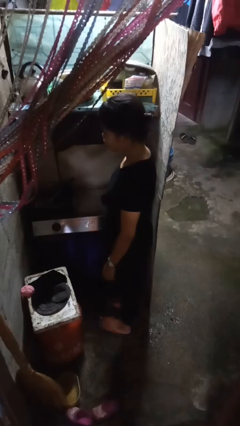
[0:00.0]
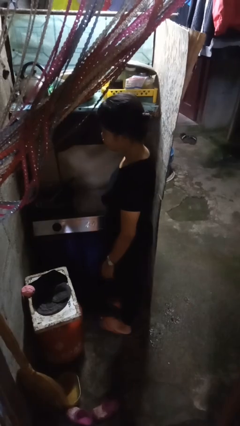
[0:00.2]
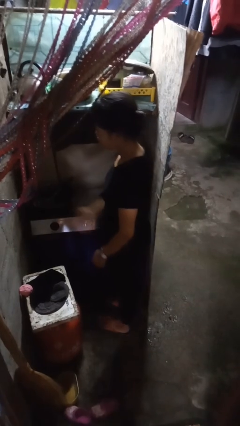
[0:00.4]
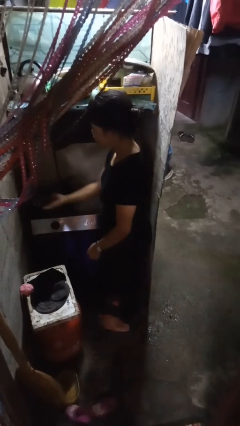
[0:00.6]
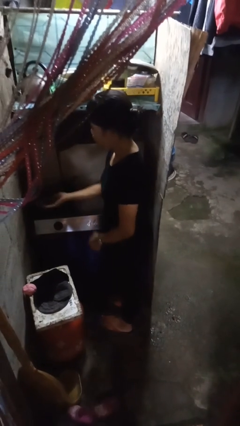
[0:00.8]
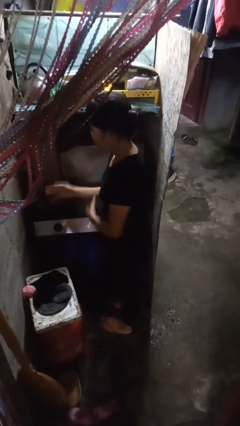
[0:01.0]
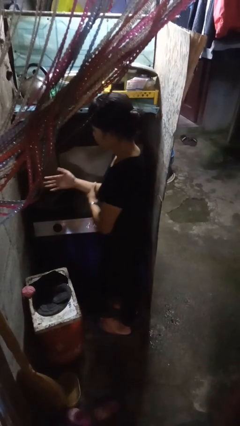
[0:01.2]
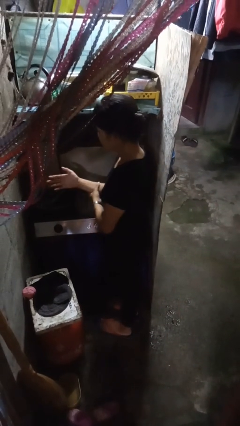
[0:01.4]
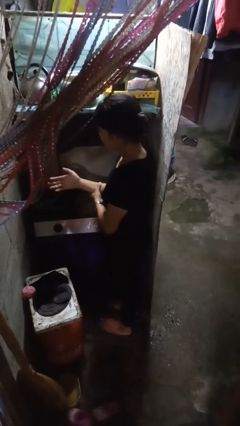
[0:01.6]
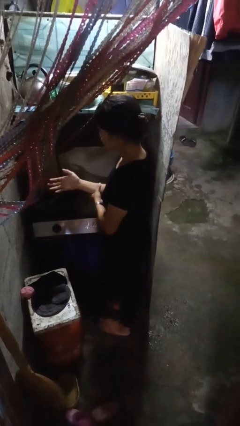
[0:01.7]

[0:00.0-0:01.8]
person burns hand

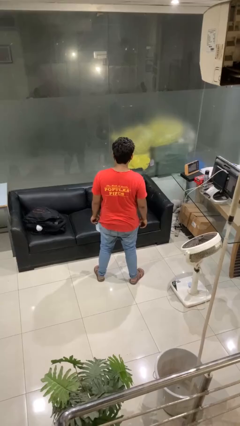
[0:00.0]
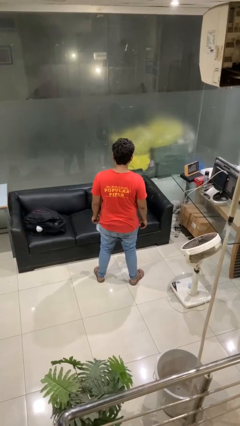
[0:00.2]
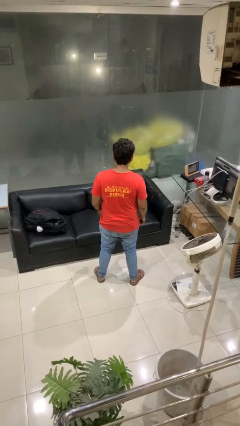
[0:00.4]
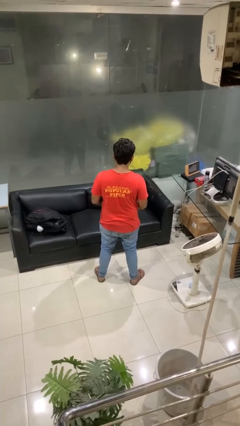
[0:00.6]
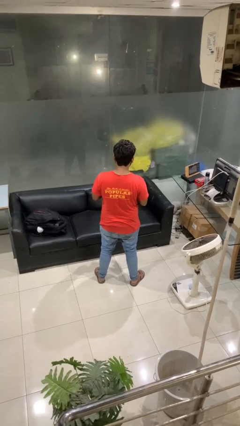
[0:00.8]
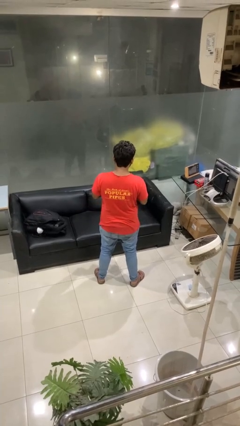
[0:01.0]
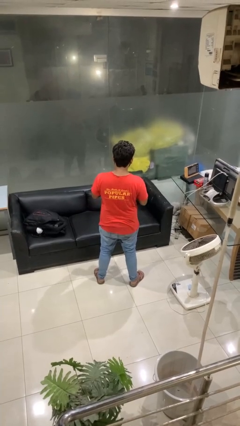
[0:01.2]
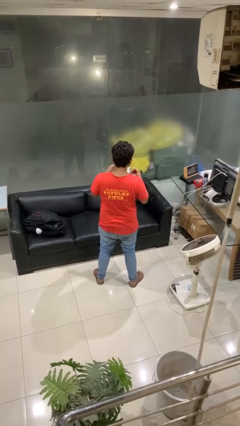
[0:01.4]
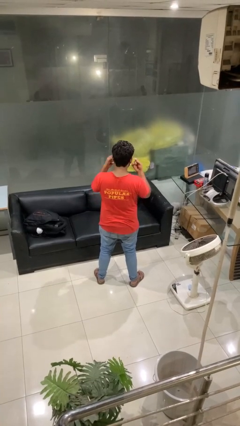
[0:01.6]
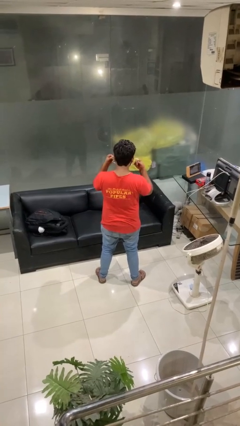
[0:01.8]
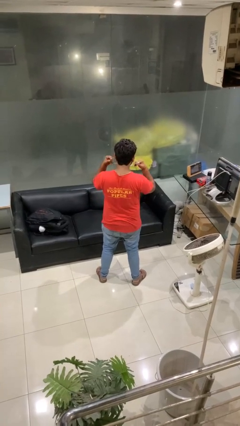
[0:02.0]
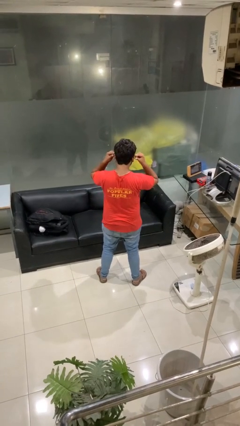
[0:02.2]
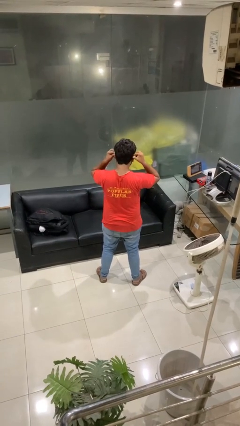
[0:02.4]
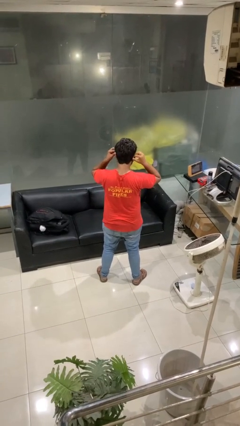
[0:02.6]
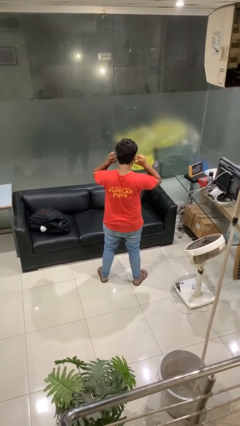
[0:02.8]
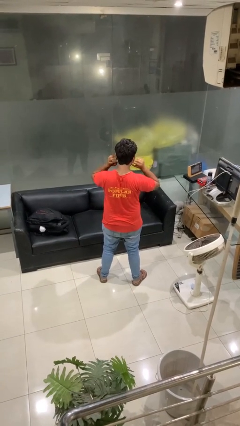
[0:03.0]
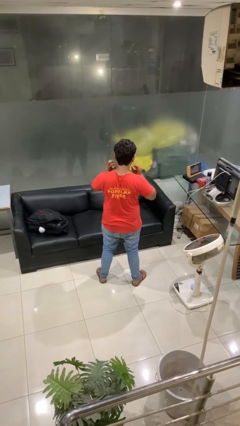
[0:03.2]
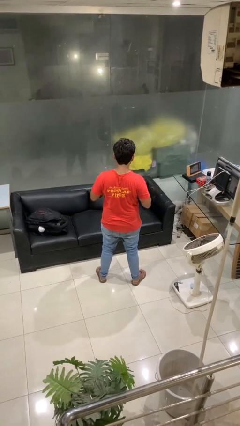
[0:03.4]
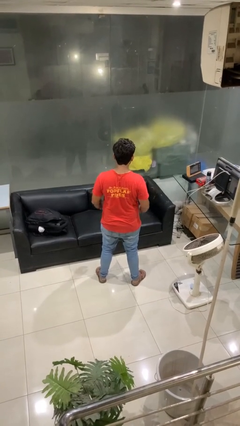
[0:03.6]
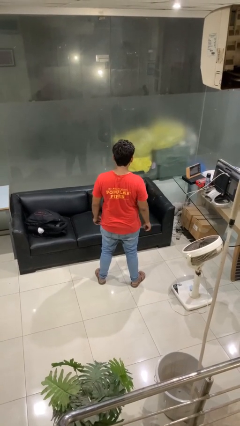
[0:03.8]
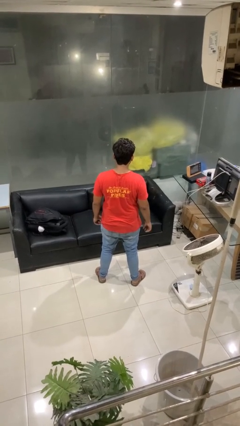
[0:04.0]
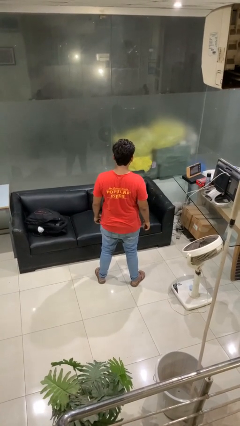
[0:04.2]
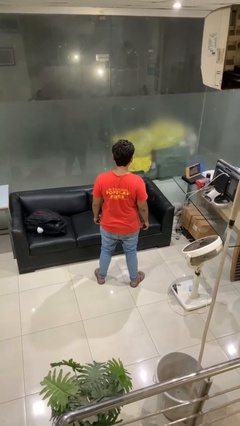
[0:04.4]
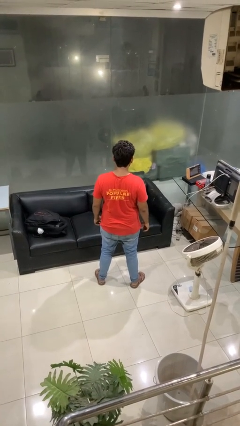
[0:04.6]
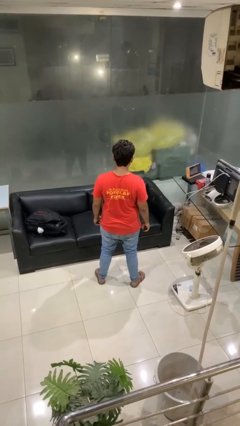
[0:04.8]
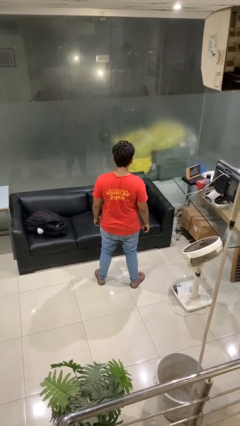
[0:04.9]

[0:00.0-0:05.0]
person puts on facemask

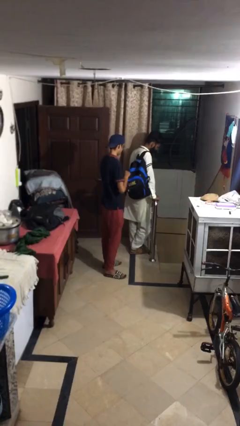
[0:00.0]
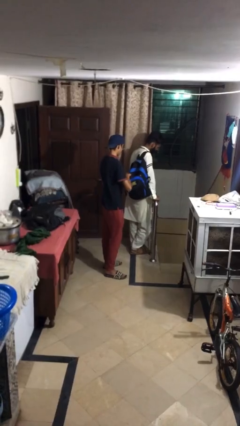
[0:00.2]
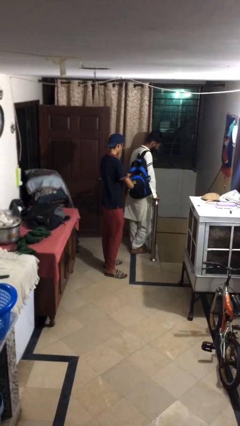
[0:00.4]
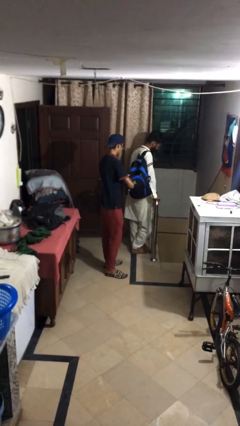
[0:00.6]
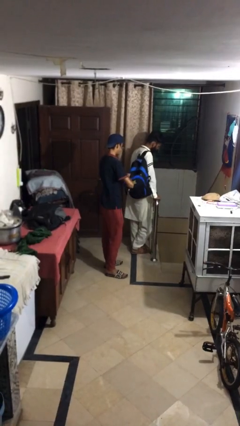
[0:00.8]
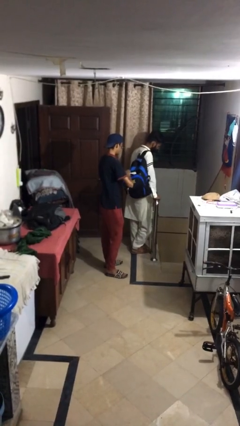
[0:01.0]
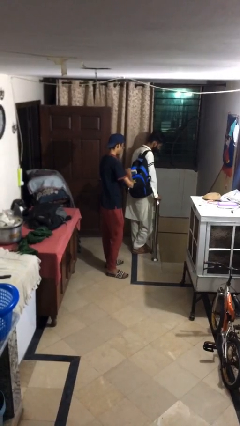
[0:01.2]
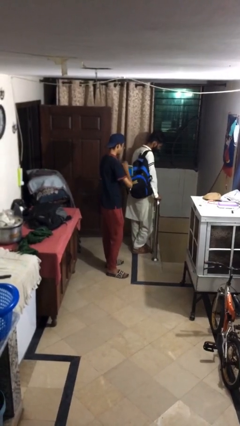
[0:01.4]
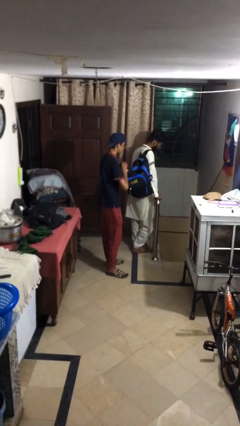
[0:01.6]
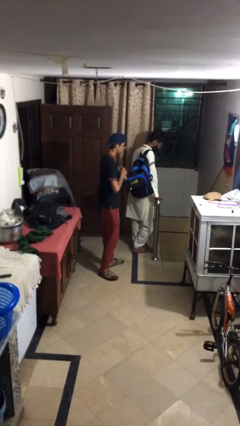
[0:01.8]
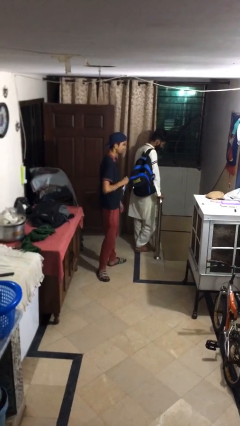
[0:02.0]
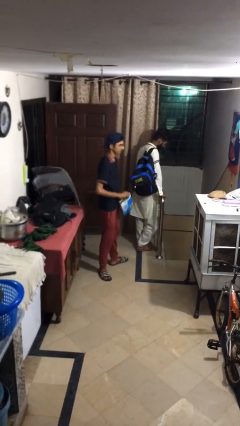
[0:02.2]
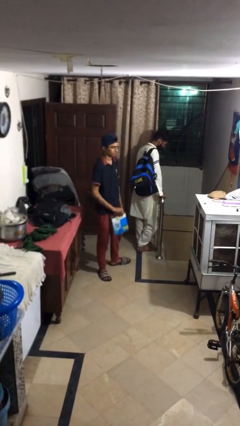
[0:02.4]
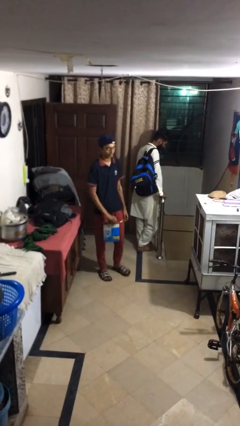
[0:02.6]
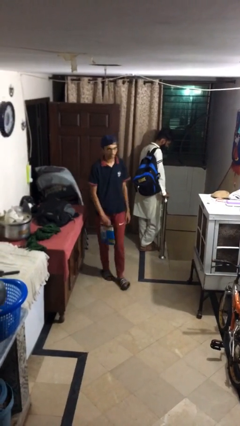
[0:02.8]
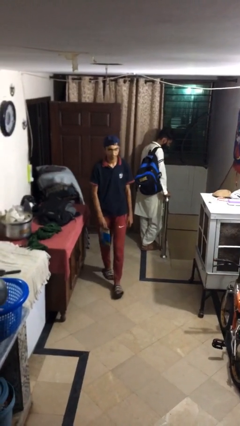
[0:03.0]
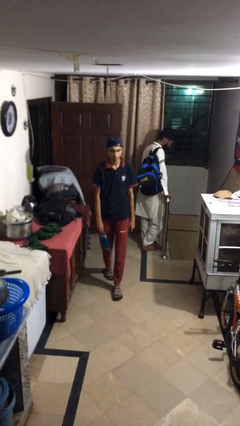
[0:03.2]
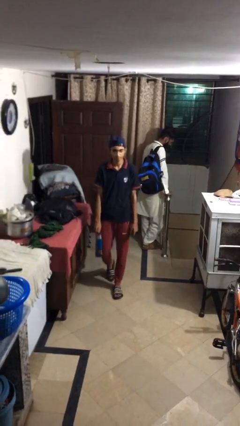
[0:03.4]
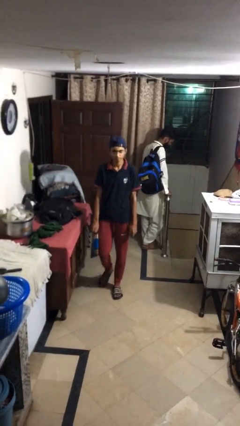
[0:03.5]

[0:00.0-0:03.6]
person steals object from person

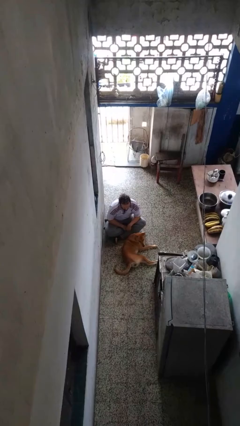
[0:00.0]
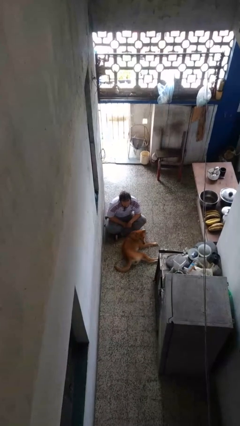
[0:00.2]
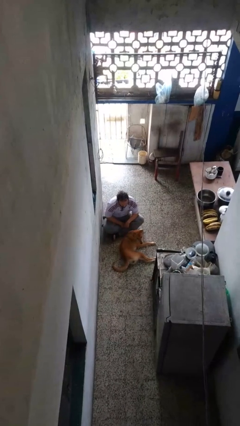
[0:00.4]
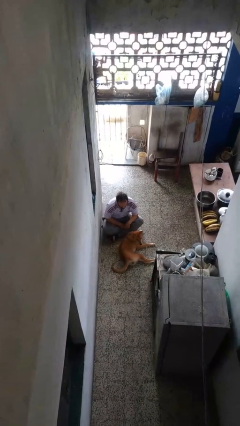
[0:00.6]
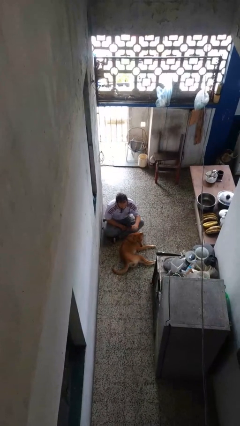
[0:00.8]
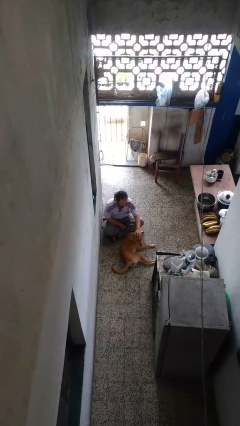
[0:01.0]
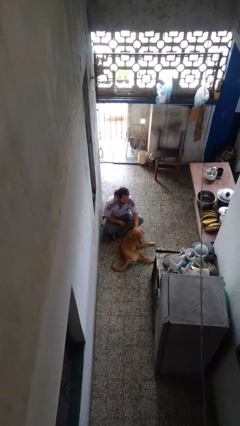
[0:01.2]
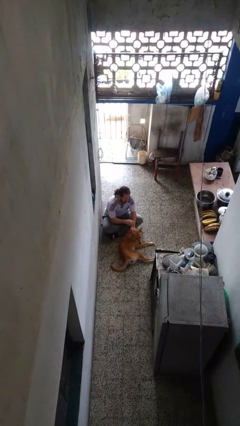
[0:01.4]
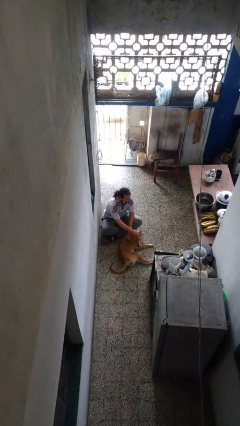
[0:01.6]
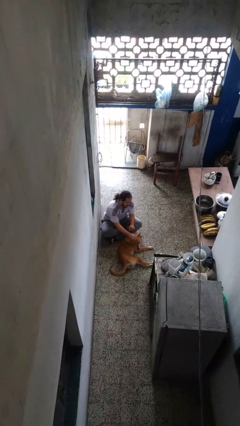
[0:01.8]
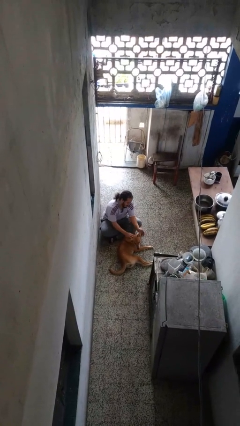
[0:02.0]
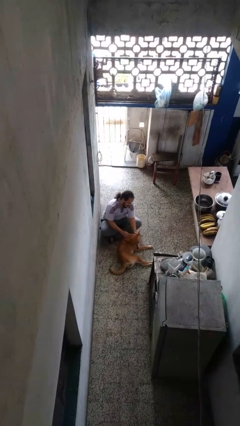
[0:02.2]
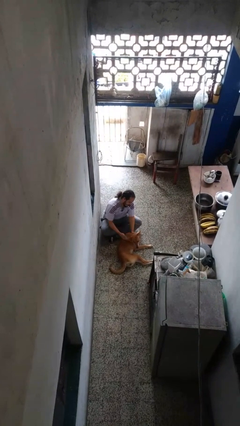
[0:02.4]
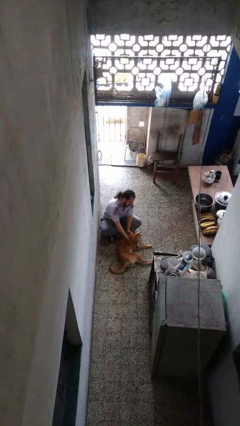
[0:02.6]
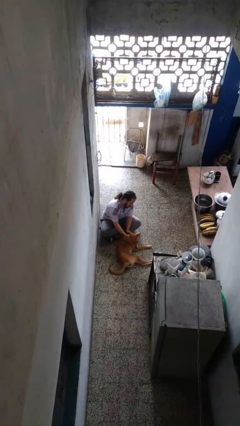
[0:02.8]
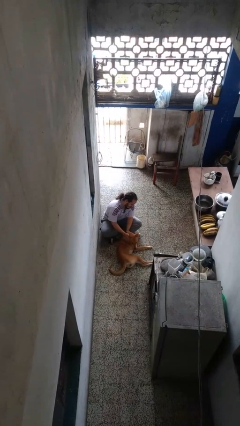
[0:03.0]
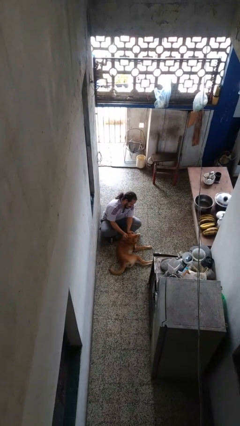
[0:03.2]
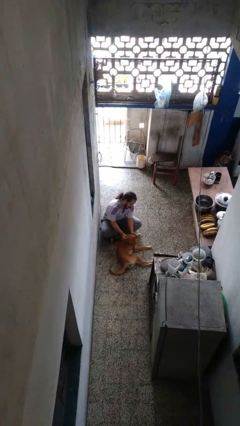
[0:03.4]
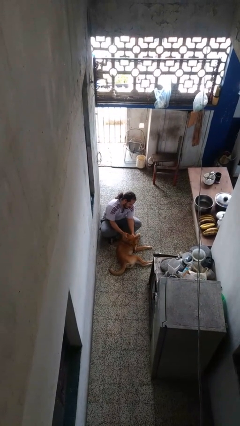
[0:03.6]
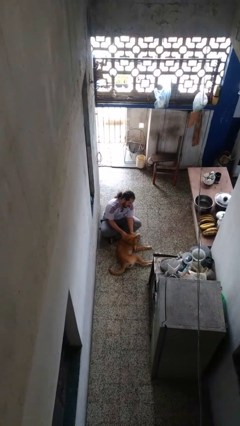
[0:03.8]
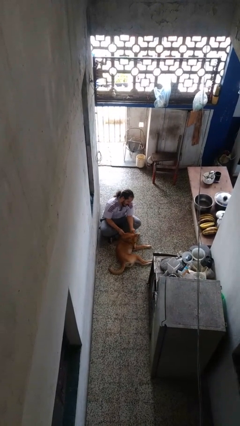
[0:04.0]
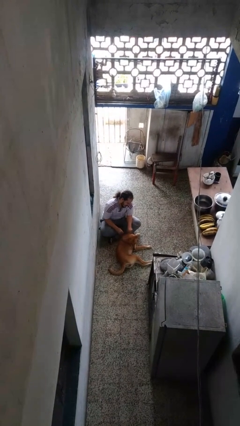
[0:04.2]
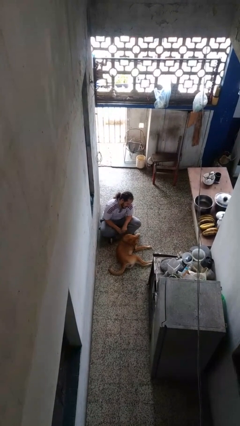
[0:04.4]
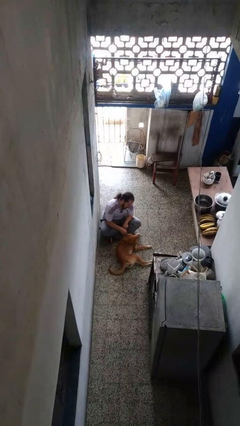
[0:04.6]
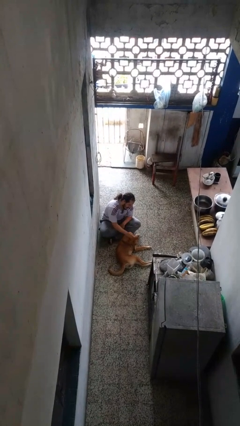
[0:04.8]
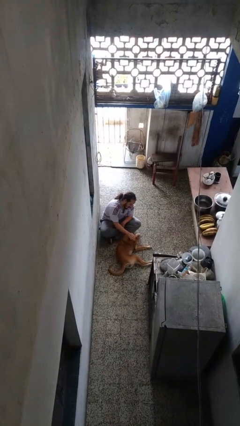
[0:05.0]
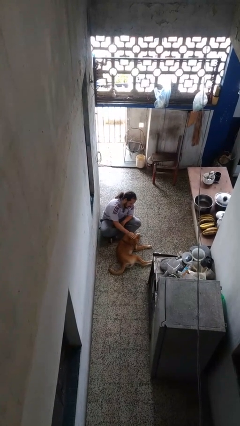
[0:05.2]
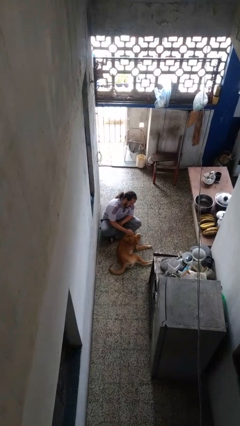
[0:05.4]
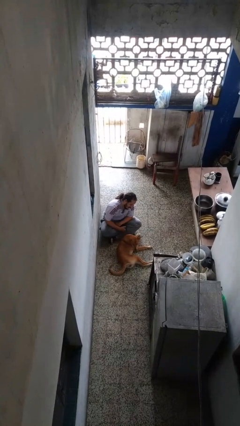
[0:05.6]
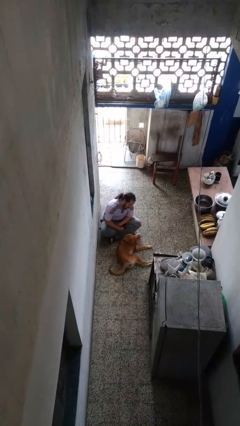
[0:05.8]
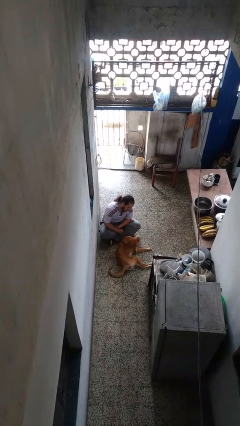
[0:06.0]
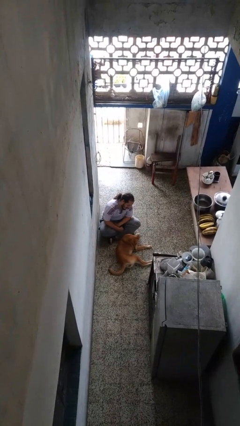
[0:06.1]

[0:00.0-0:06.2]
person pets dog

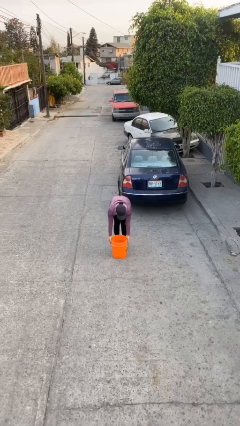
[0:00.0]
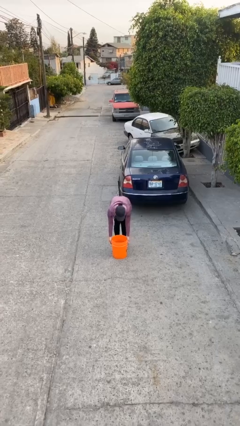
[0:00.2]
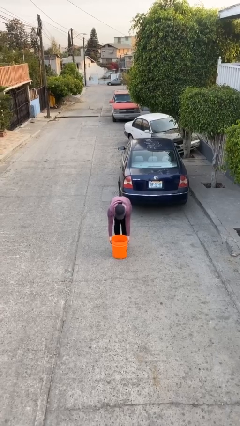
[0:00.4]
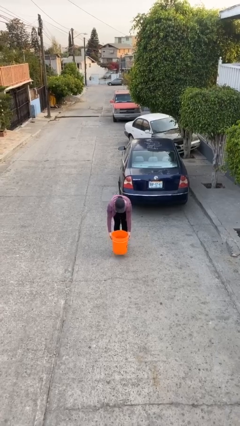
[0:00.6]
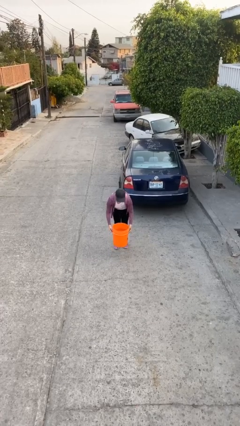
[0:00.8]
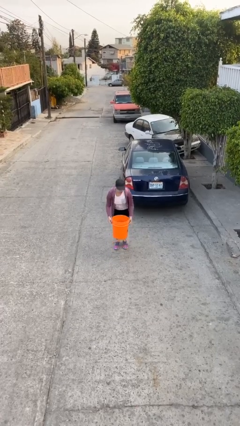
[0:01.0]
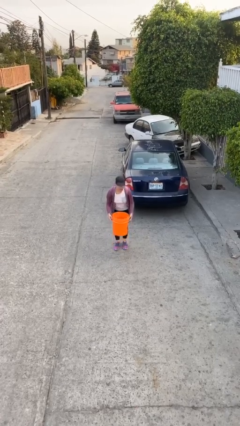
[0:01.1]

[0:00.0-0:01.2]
person picks up object from floor
